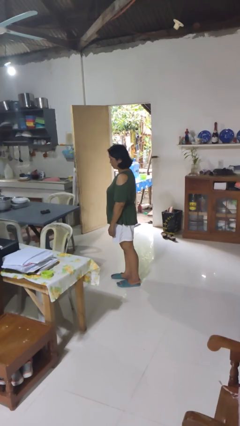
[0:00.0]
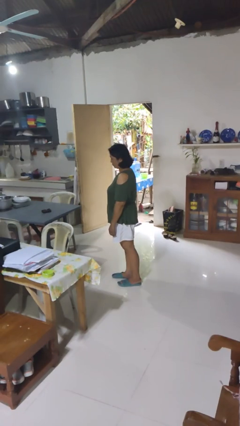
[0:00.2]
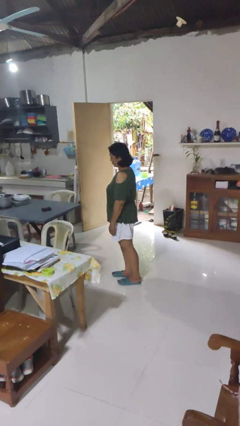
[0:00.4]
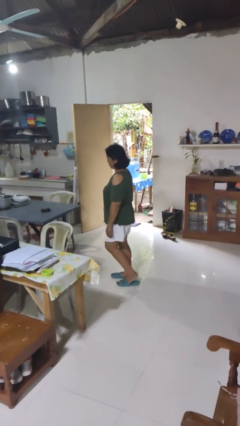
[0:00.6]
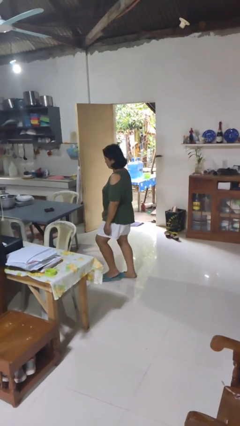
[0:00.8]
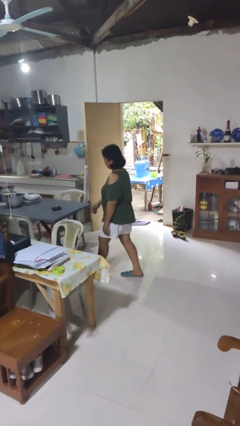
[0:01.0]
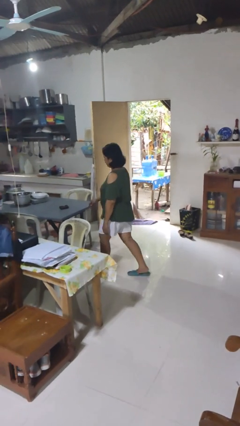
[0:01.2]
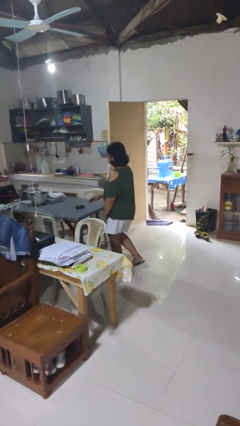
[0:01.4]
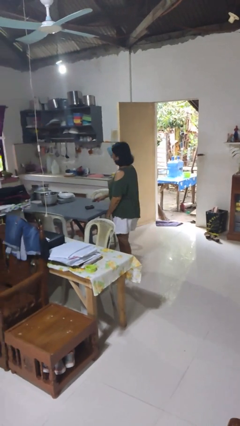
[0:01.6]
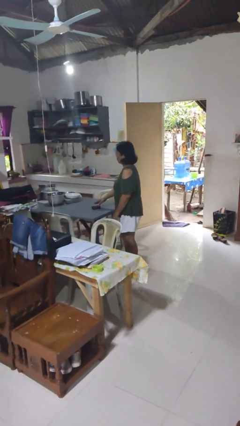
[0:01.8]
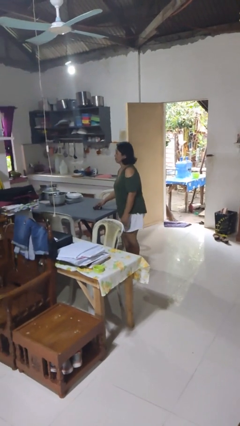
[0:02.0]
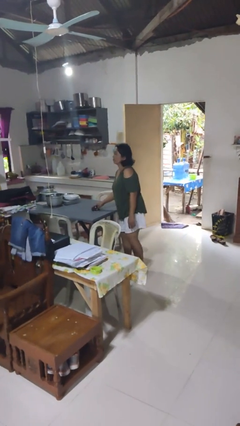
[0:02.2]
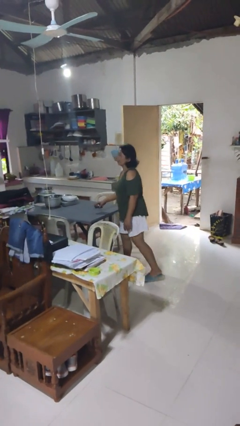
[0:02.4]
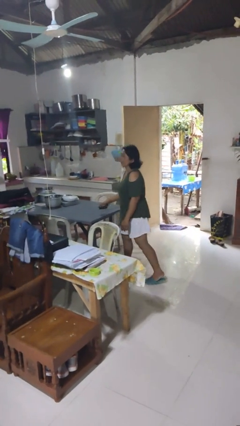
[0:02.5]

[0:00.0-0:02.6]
person picks up object from table

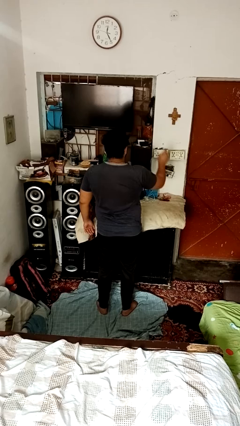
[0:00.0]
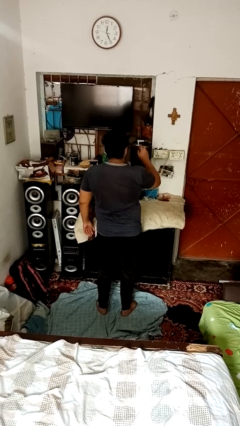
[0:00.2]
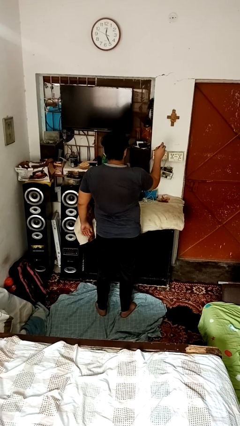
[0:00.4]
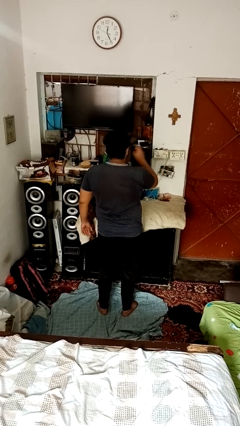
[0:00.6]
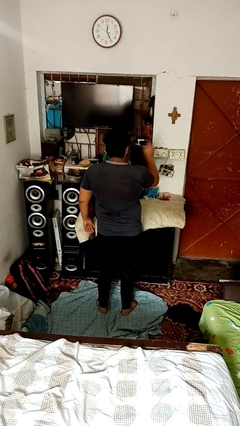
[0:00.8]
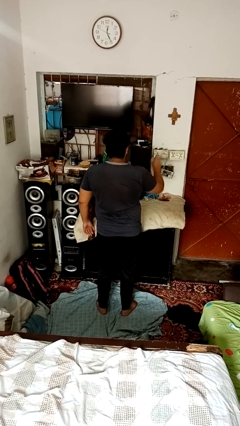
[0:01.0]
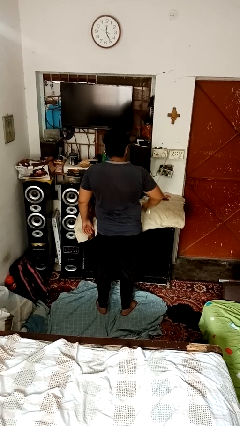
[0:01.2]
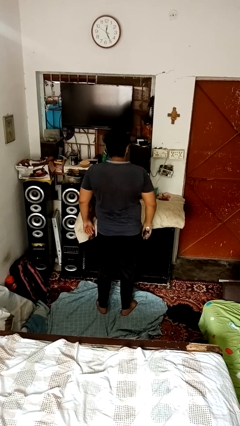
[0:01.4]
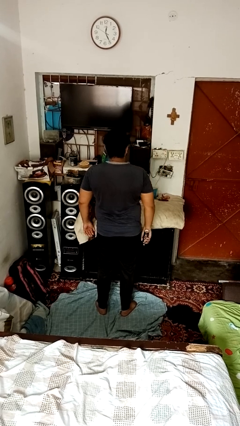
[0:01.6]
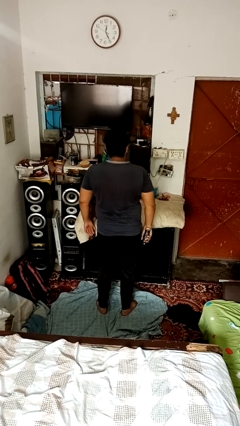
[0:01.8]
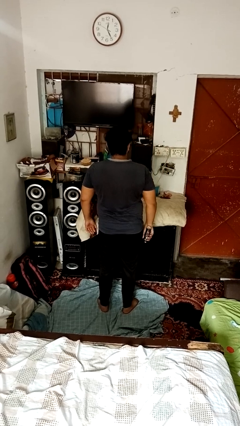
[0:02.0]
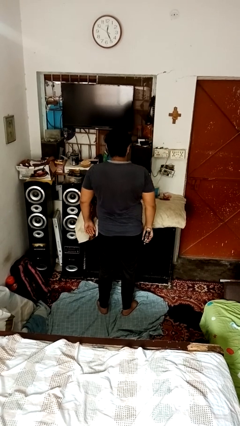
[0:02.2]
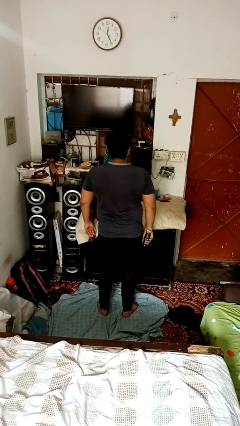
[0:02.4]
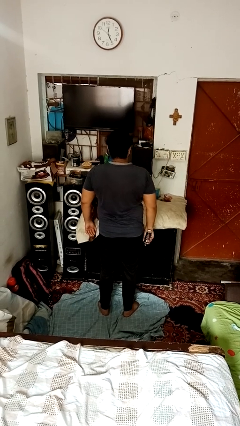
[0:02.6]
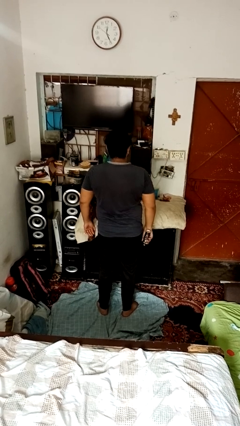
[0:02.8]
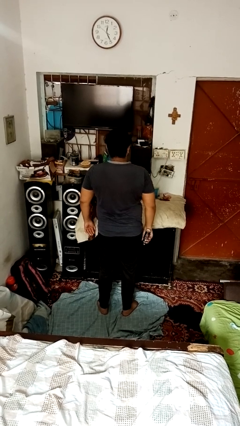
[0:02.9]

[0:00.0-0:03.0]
person sprays from bottle

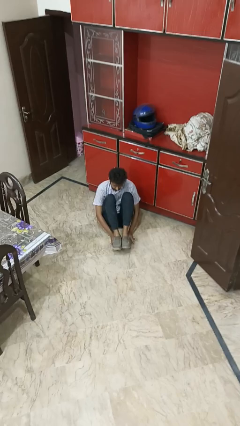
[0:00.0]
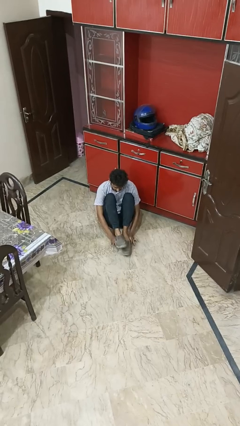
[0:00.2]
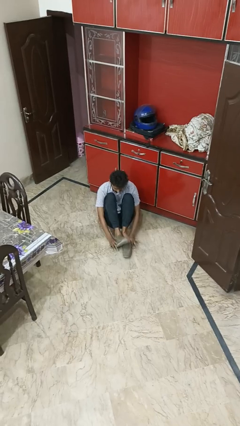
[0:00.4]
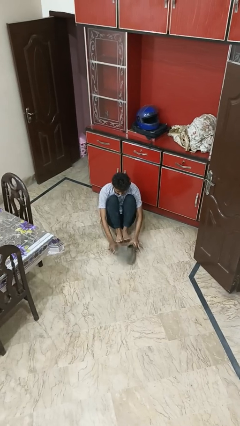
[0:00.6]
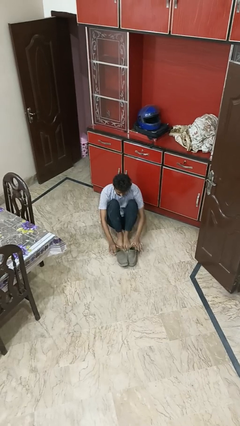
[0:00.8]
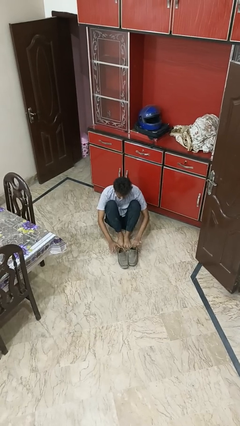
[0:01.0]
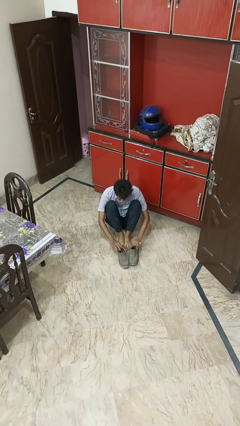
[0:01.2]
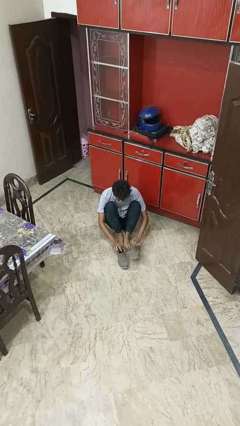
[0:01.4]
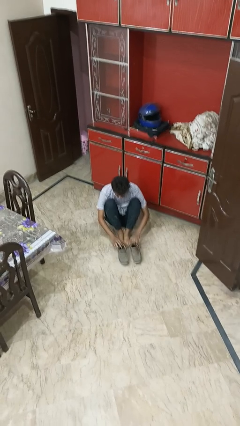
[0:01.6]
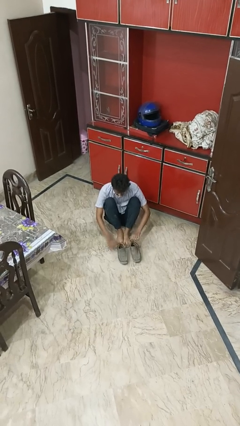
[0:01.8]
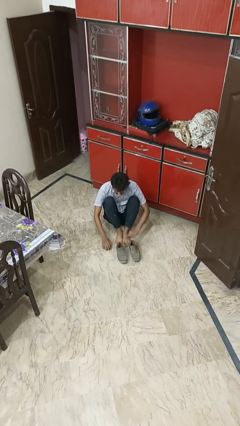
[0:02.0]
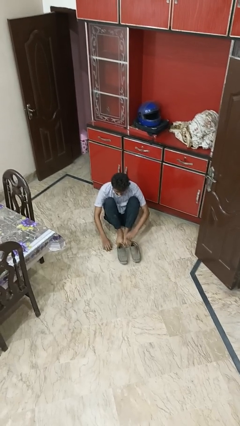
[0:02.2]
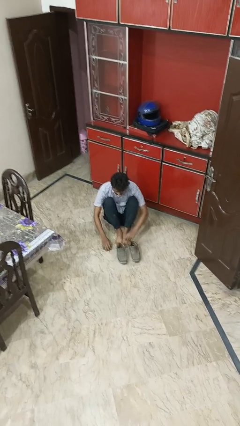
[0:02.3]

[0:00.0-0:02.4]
person takes off boots

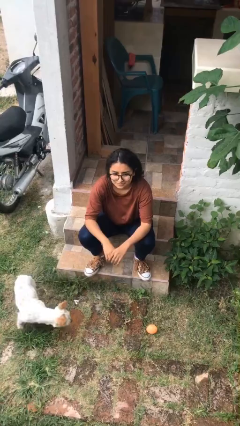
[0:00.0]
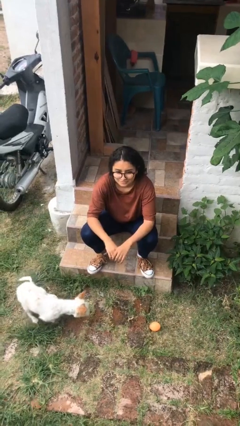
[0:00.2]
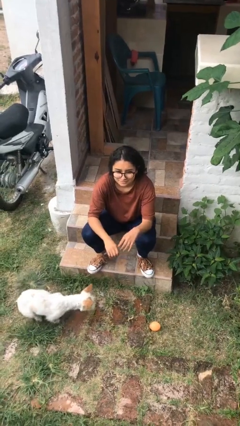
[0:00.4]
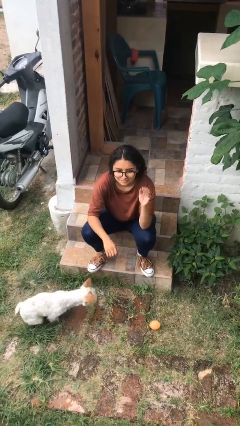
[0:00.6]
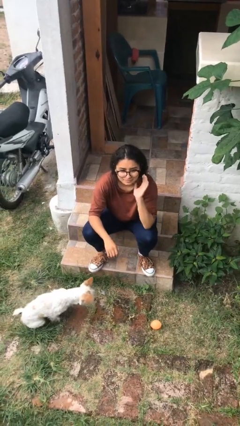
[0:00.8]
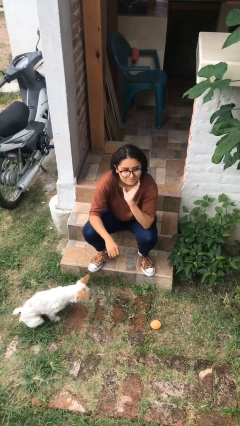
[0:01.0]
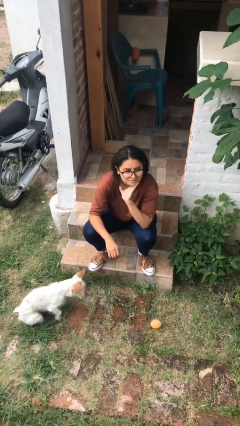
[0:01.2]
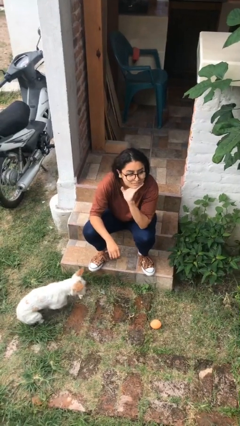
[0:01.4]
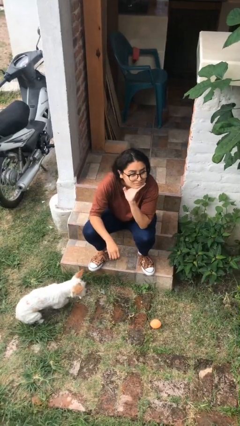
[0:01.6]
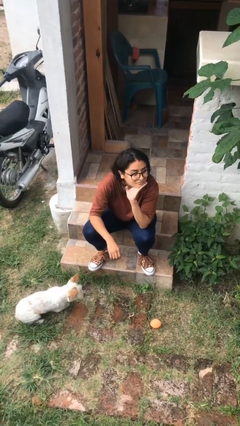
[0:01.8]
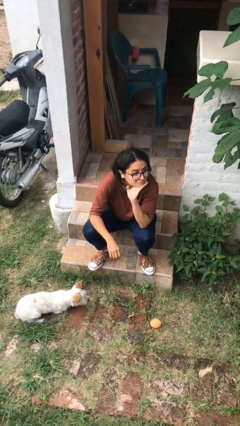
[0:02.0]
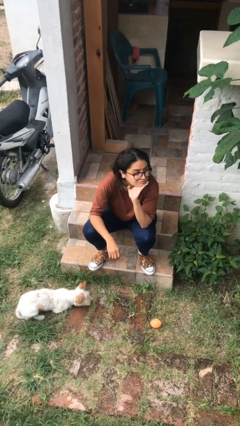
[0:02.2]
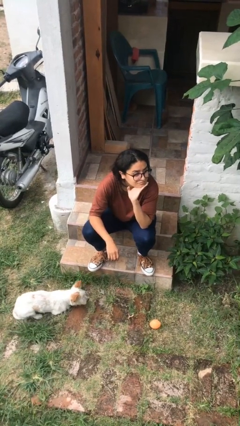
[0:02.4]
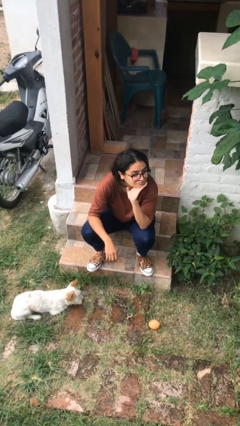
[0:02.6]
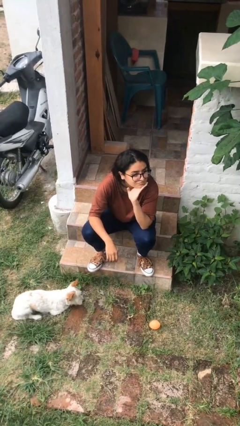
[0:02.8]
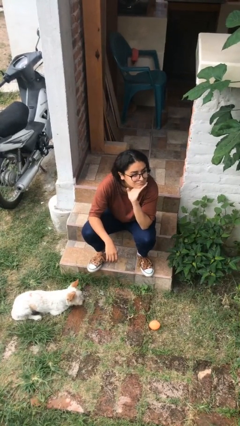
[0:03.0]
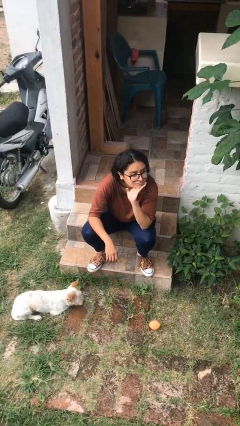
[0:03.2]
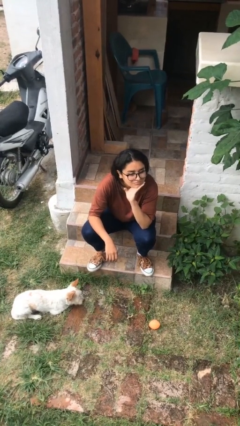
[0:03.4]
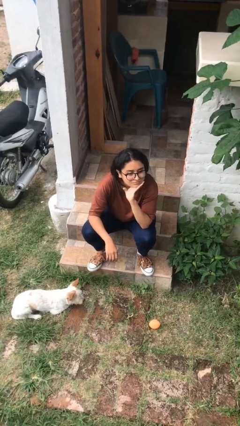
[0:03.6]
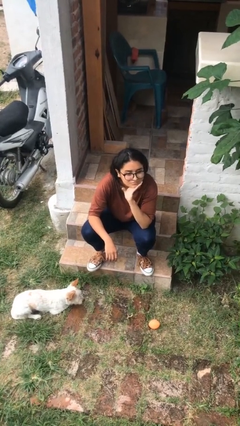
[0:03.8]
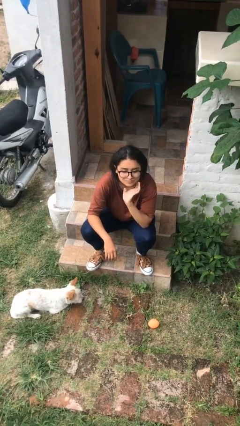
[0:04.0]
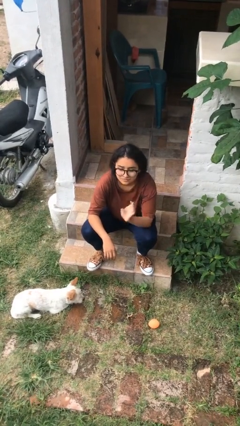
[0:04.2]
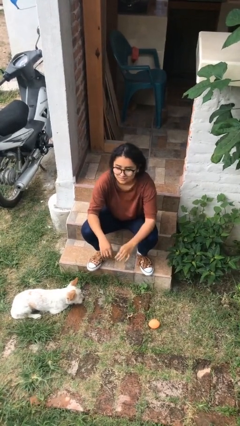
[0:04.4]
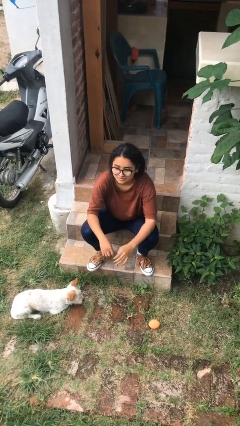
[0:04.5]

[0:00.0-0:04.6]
person strokes chin

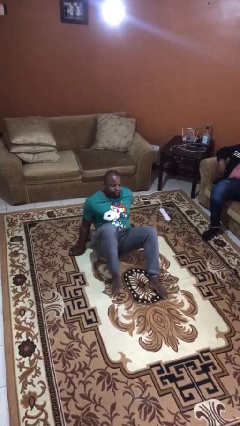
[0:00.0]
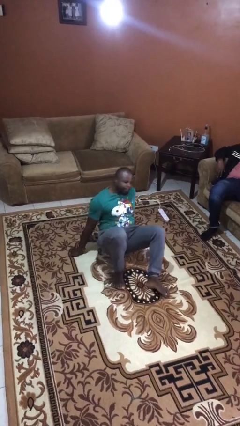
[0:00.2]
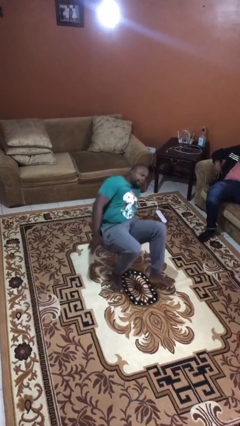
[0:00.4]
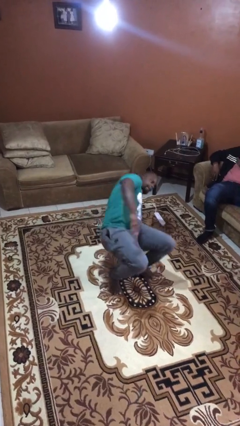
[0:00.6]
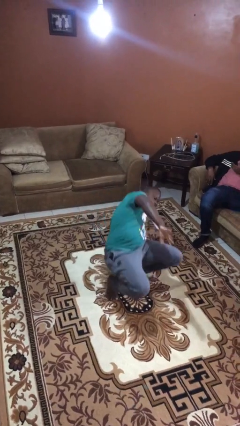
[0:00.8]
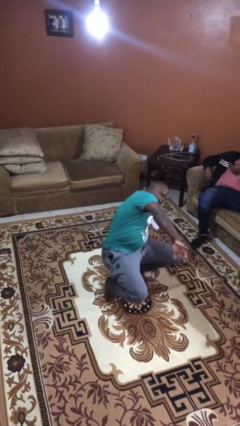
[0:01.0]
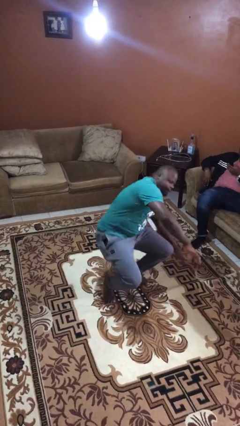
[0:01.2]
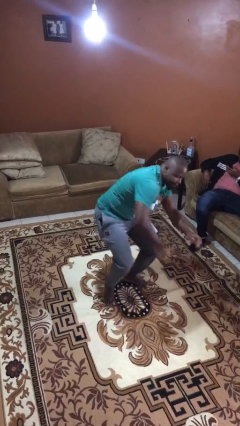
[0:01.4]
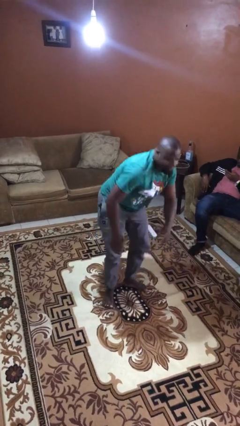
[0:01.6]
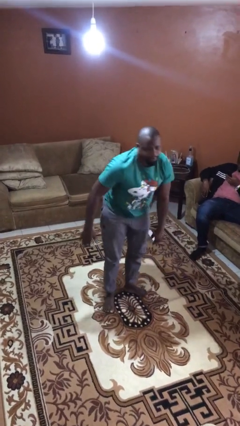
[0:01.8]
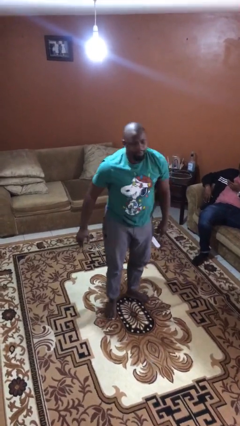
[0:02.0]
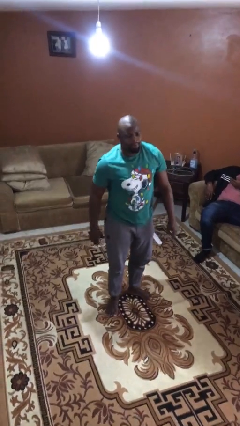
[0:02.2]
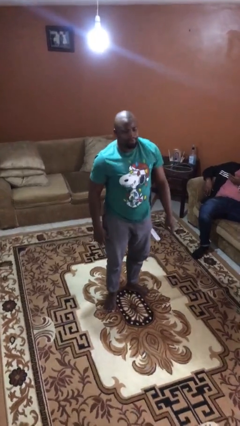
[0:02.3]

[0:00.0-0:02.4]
person stands up

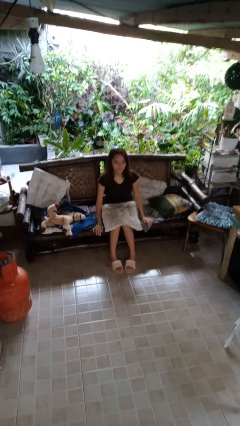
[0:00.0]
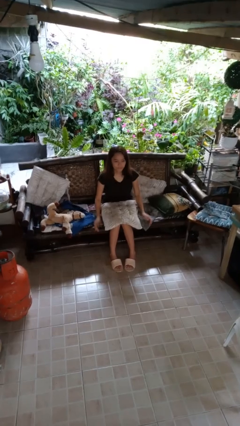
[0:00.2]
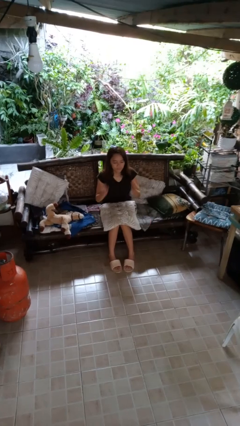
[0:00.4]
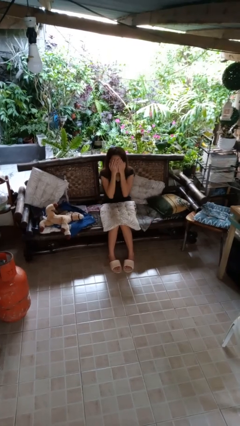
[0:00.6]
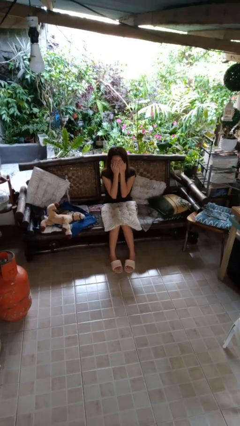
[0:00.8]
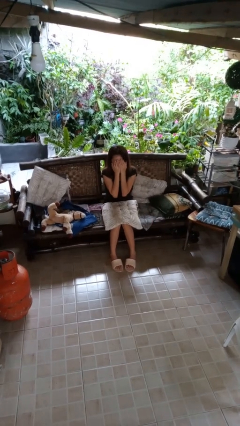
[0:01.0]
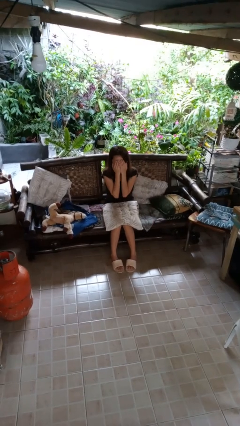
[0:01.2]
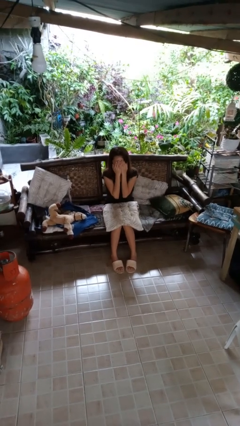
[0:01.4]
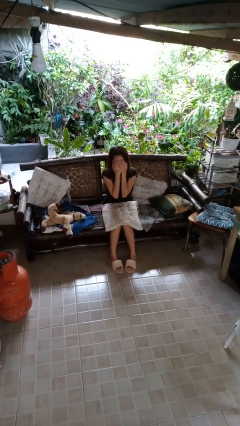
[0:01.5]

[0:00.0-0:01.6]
person covers face with hands

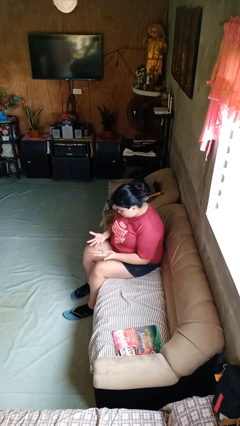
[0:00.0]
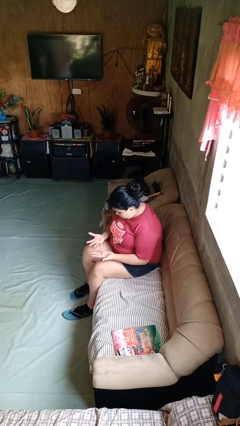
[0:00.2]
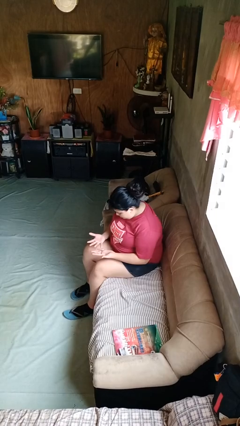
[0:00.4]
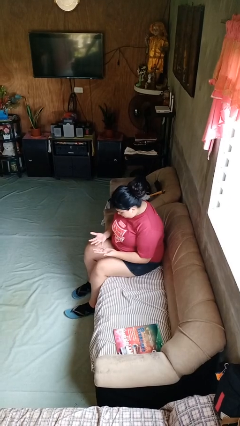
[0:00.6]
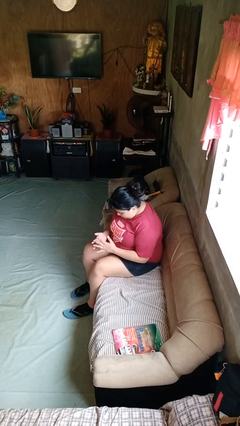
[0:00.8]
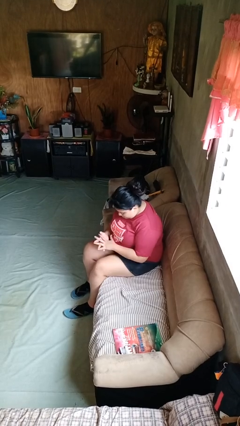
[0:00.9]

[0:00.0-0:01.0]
person looks at hands in lap
